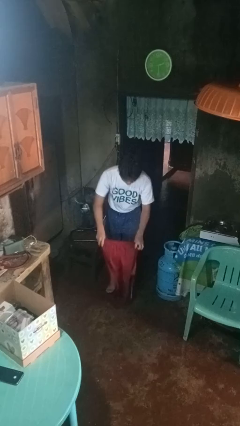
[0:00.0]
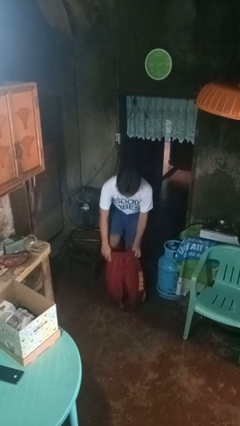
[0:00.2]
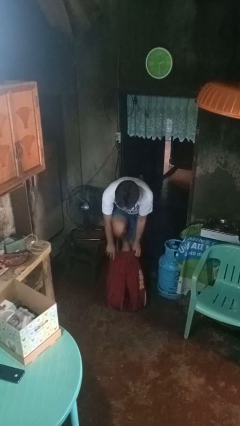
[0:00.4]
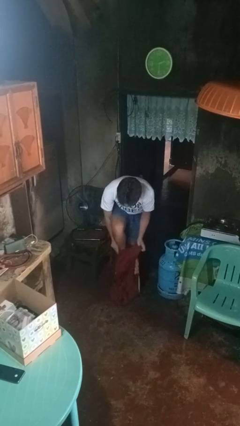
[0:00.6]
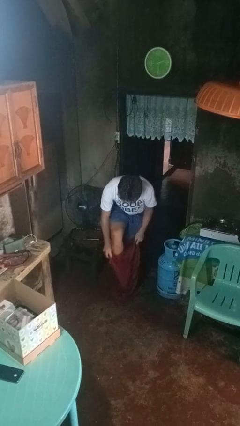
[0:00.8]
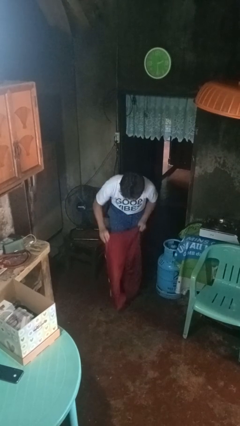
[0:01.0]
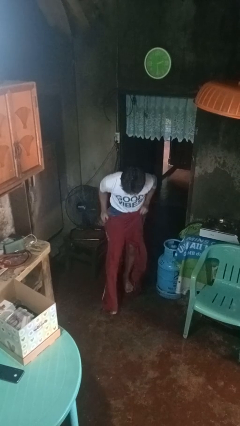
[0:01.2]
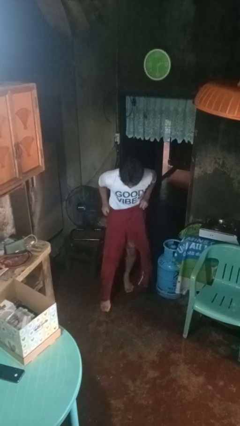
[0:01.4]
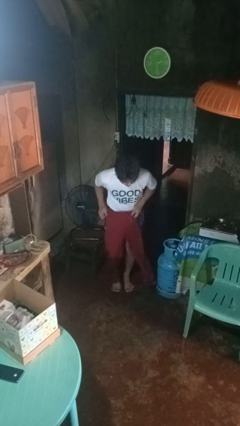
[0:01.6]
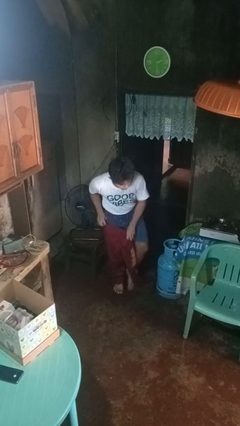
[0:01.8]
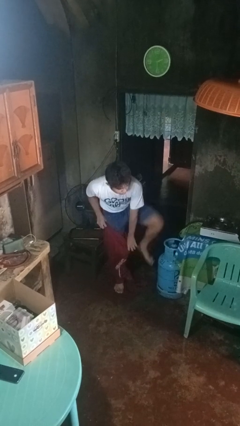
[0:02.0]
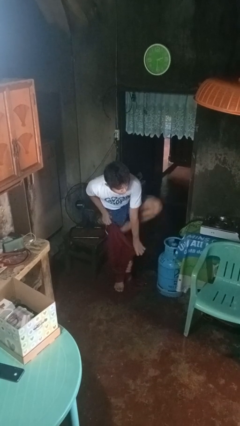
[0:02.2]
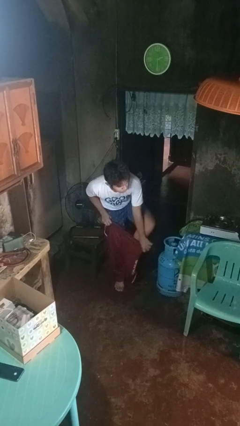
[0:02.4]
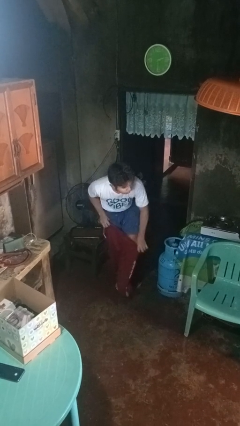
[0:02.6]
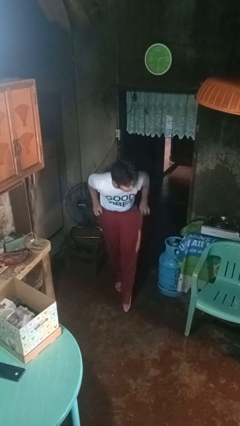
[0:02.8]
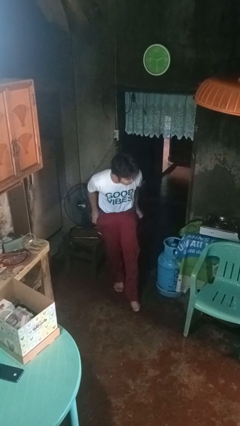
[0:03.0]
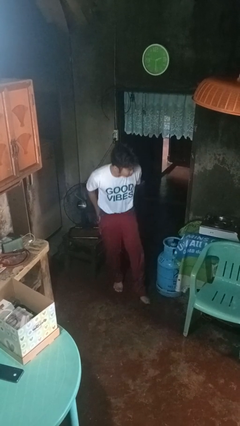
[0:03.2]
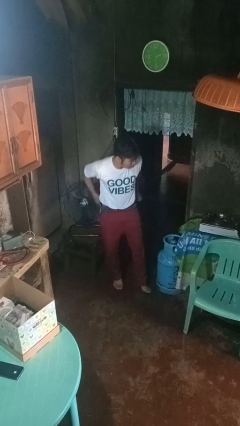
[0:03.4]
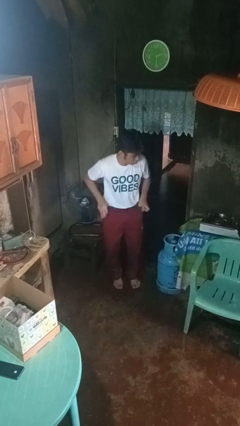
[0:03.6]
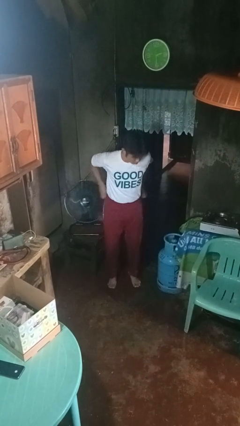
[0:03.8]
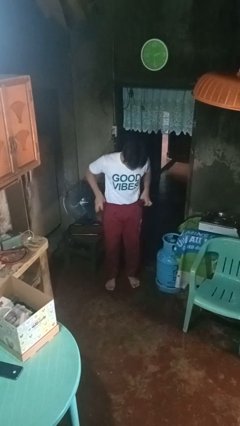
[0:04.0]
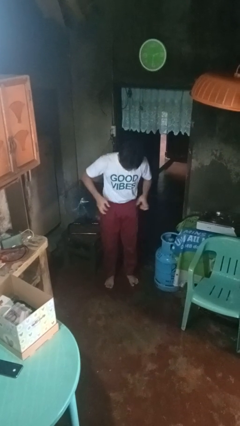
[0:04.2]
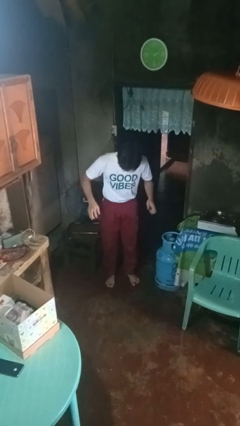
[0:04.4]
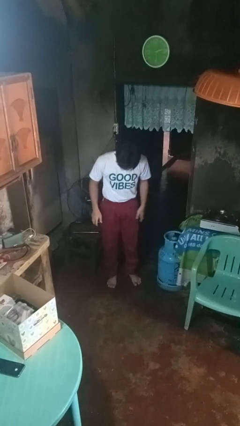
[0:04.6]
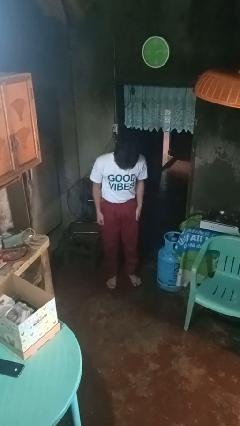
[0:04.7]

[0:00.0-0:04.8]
person puts on pants

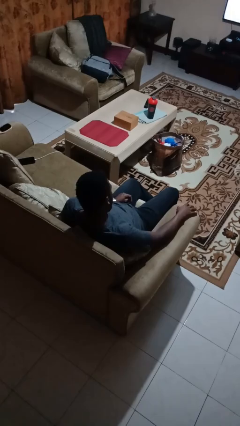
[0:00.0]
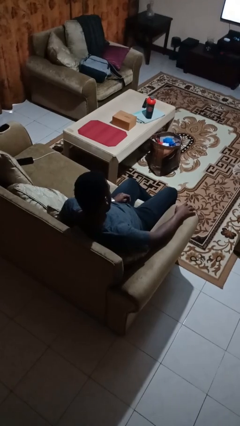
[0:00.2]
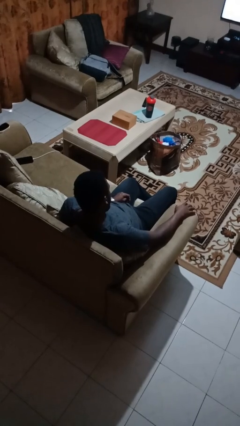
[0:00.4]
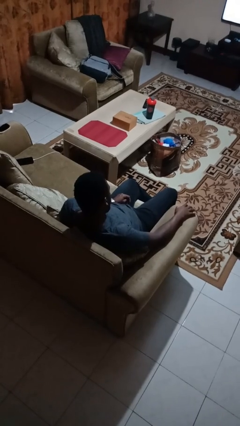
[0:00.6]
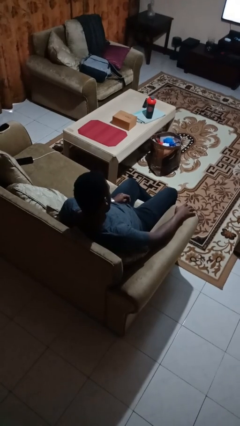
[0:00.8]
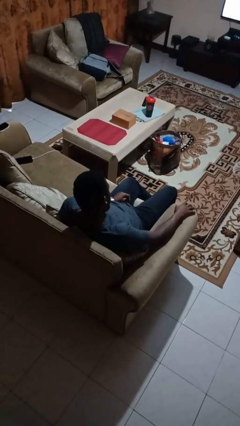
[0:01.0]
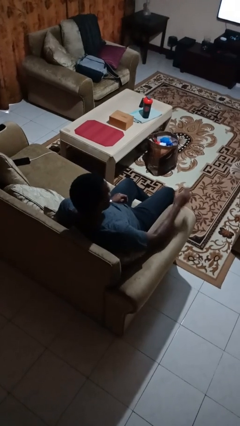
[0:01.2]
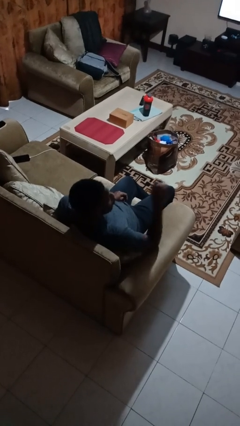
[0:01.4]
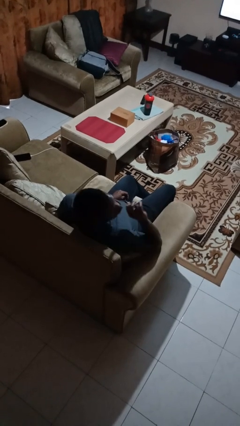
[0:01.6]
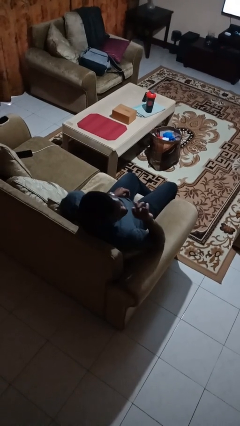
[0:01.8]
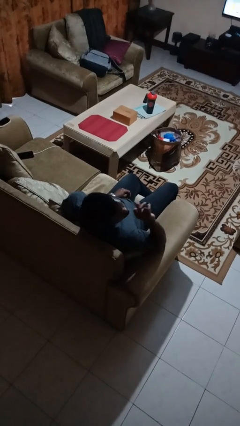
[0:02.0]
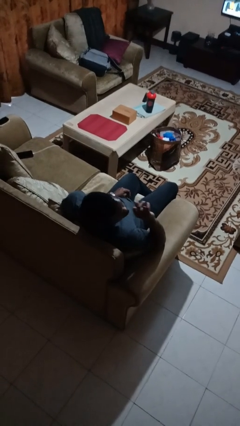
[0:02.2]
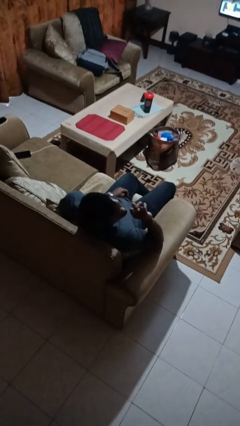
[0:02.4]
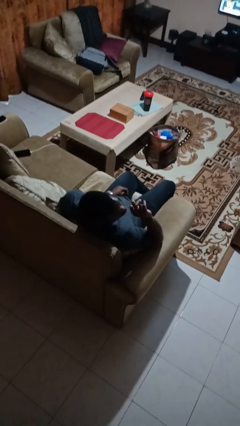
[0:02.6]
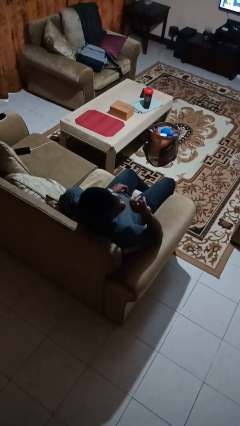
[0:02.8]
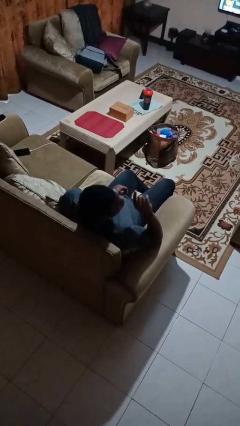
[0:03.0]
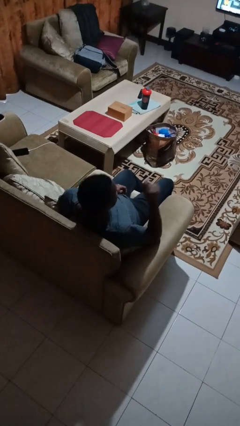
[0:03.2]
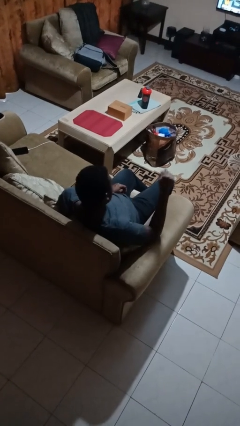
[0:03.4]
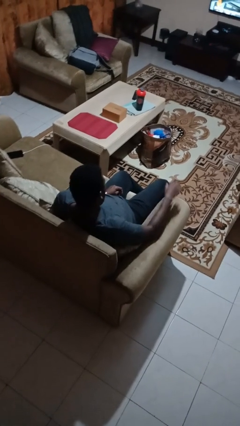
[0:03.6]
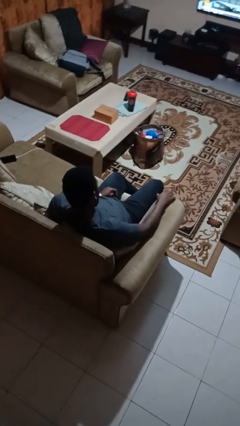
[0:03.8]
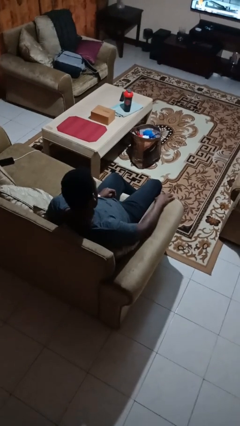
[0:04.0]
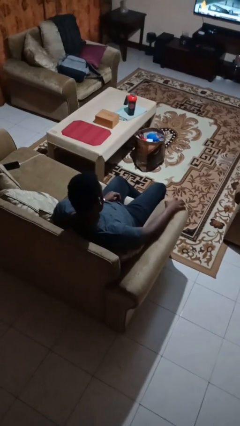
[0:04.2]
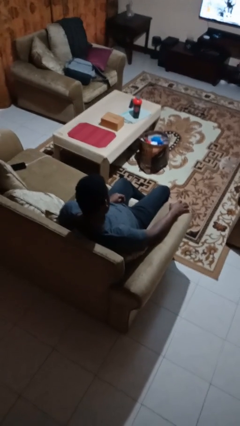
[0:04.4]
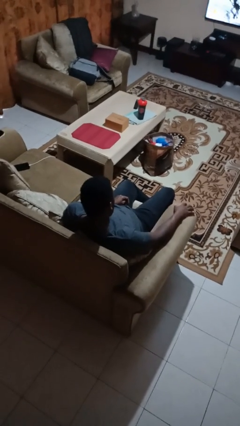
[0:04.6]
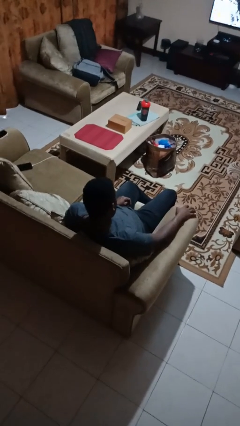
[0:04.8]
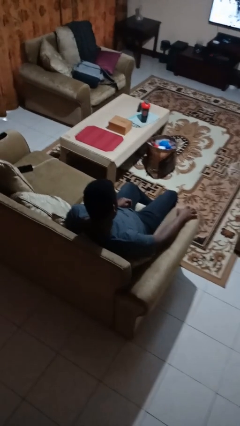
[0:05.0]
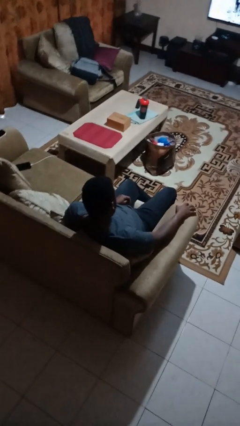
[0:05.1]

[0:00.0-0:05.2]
person gestures be quiet

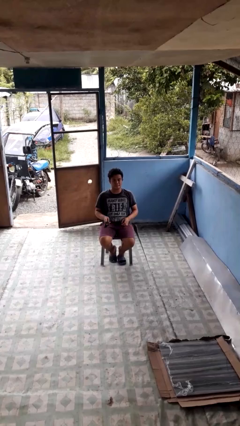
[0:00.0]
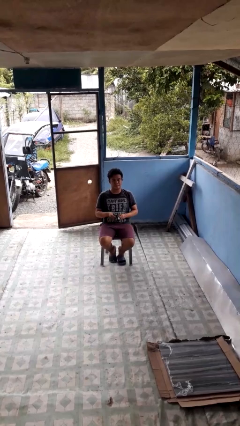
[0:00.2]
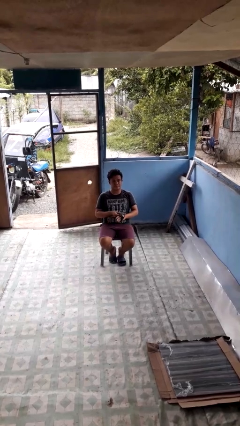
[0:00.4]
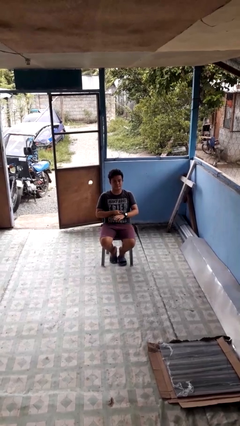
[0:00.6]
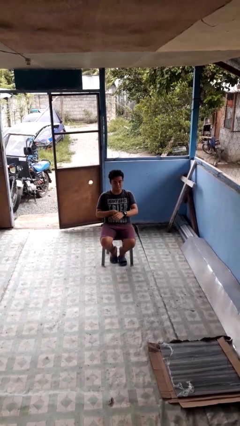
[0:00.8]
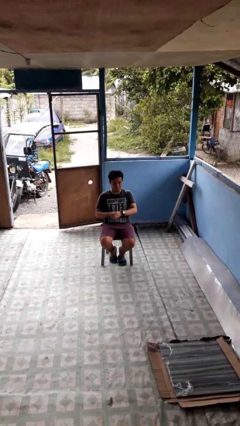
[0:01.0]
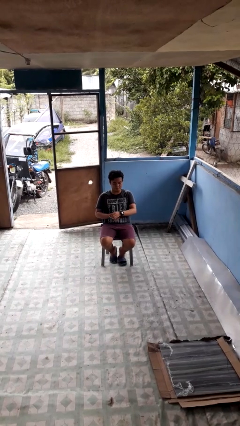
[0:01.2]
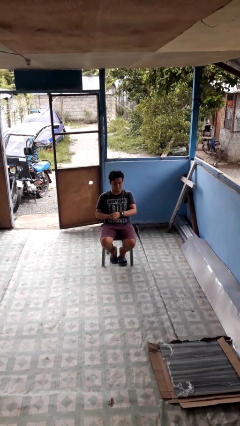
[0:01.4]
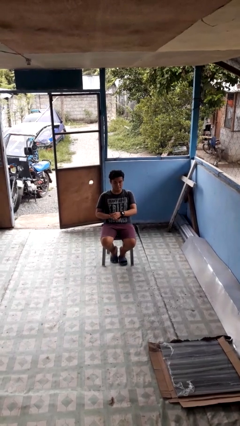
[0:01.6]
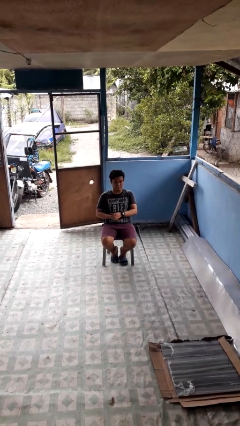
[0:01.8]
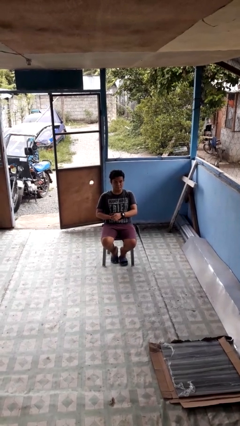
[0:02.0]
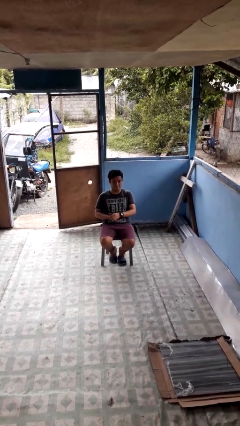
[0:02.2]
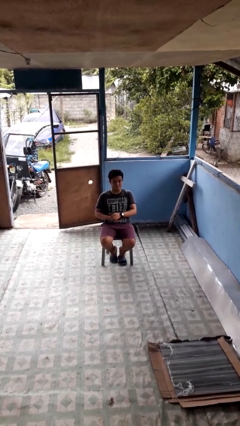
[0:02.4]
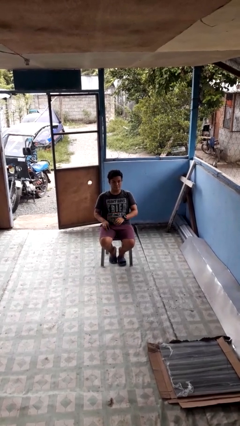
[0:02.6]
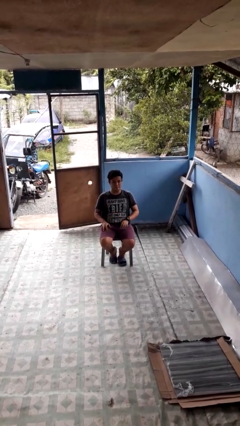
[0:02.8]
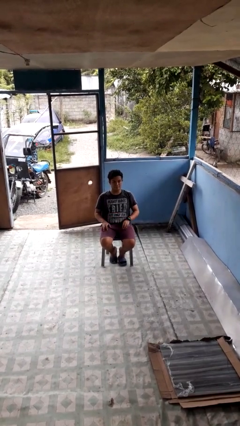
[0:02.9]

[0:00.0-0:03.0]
person puts on wristwatch

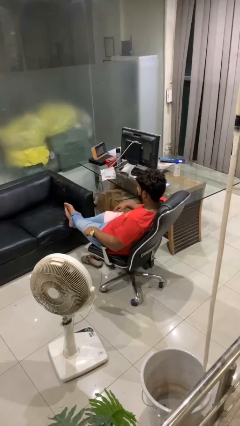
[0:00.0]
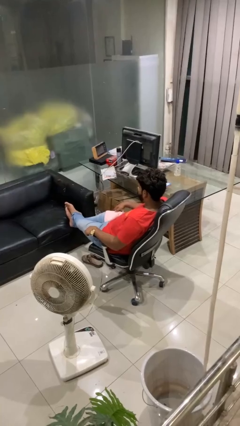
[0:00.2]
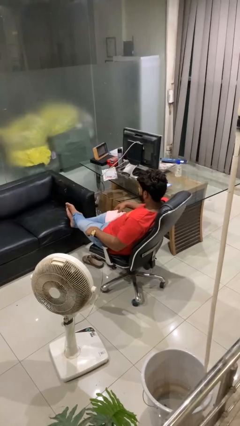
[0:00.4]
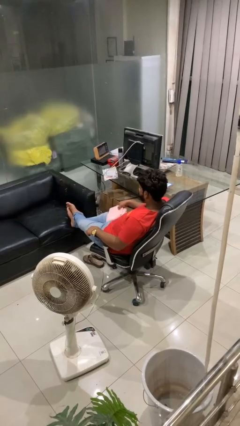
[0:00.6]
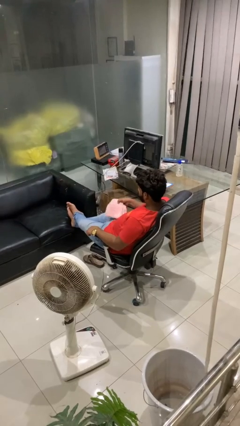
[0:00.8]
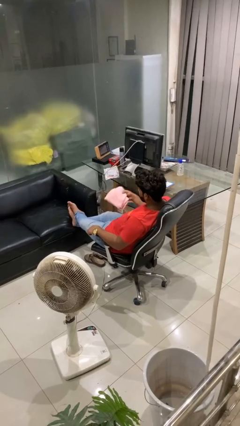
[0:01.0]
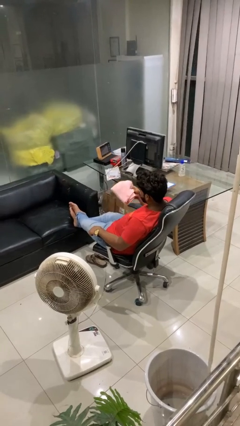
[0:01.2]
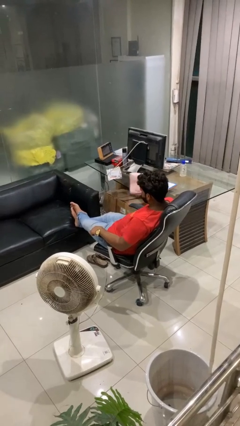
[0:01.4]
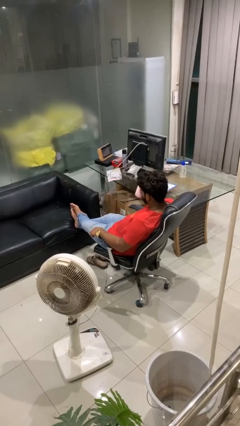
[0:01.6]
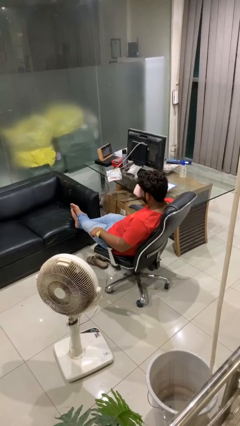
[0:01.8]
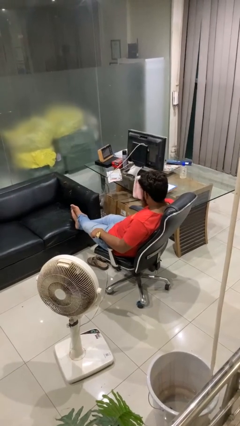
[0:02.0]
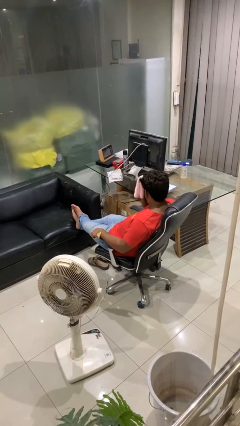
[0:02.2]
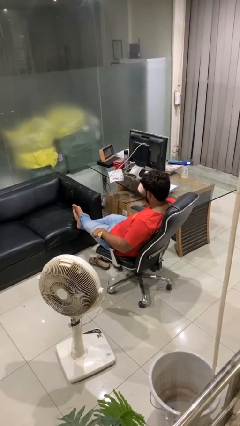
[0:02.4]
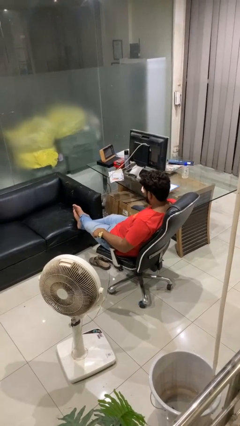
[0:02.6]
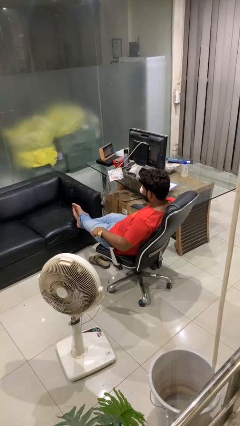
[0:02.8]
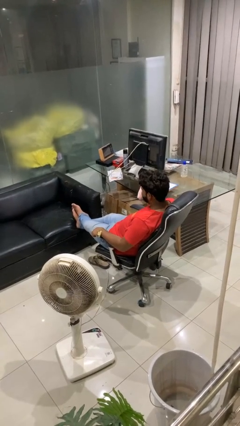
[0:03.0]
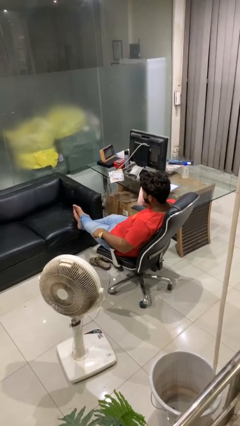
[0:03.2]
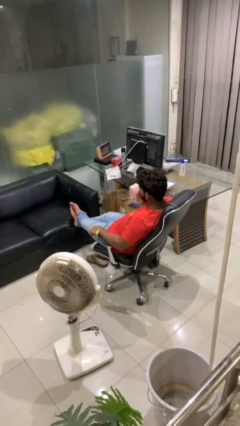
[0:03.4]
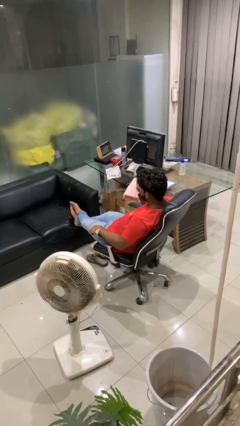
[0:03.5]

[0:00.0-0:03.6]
person wipes mouth with napkin

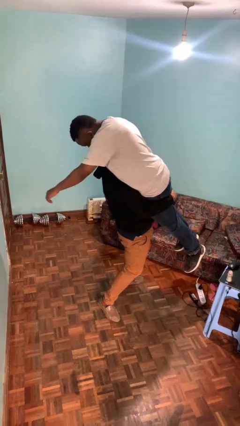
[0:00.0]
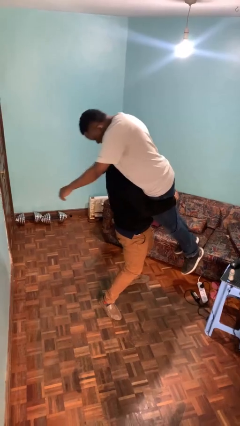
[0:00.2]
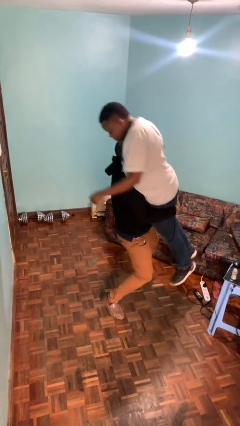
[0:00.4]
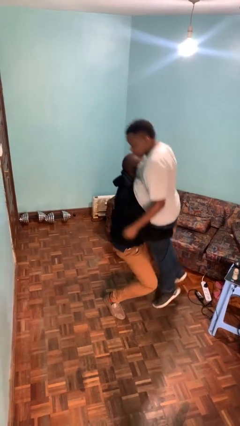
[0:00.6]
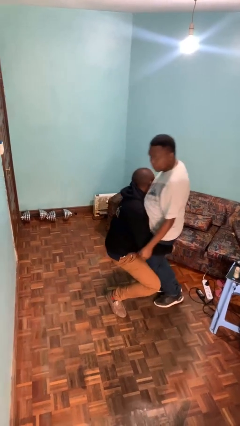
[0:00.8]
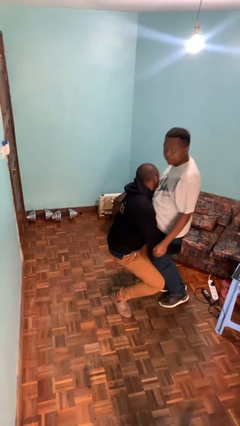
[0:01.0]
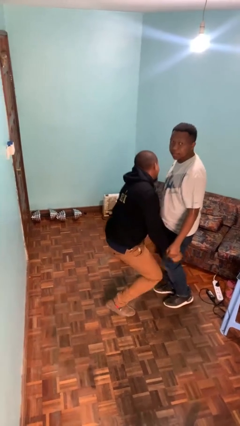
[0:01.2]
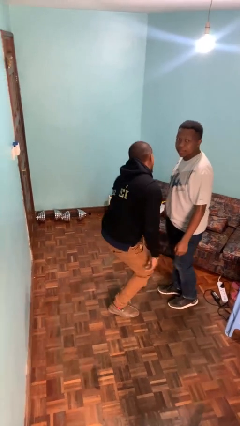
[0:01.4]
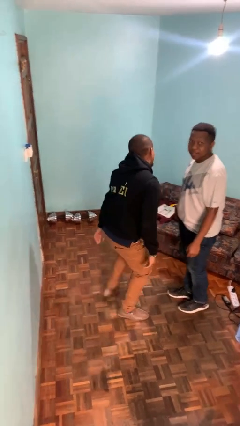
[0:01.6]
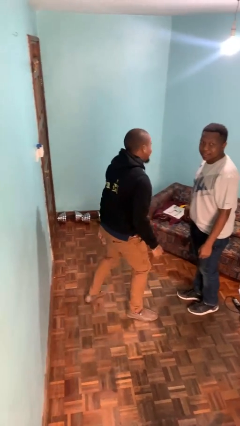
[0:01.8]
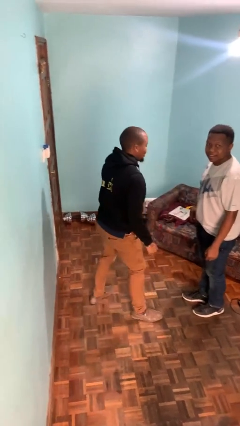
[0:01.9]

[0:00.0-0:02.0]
person puts down person
